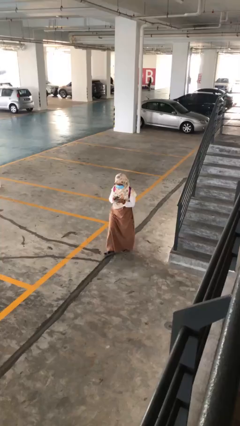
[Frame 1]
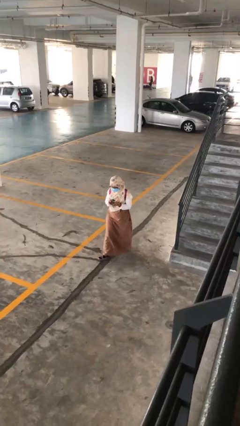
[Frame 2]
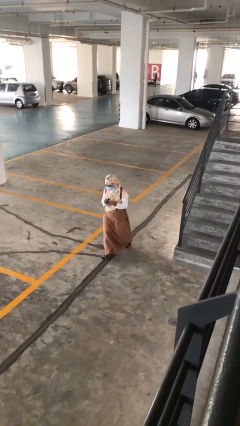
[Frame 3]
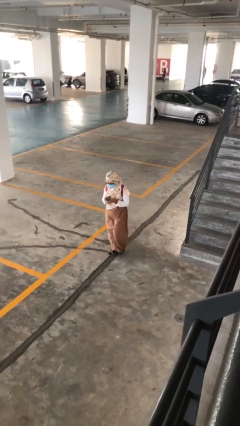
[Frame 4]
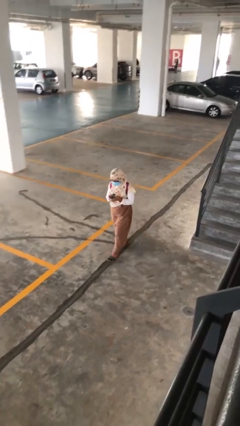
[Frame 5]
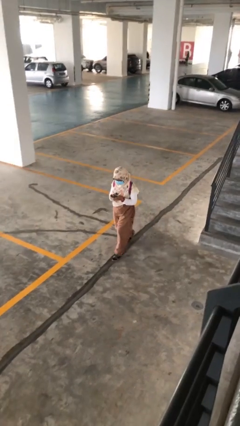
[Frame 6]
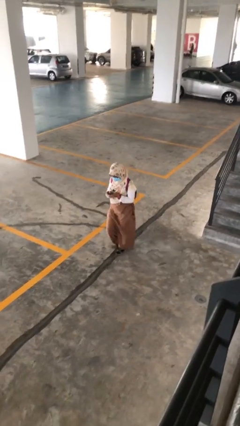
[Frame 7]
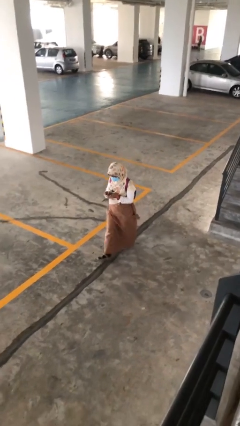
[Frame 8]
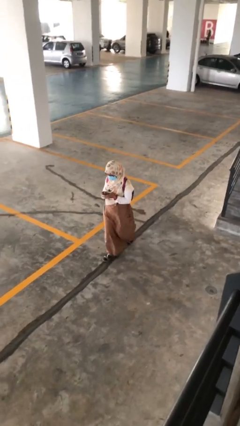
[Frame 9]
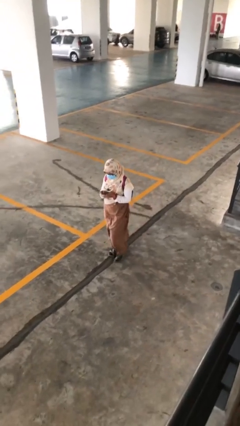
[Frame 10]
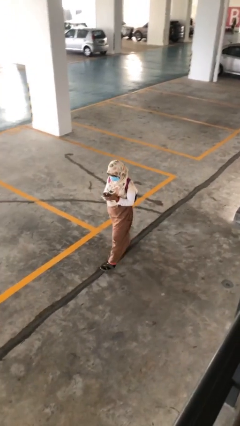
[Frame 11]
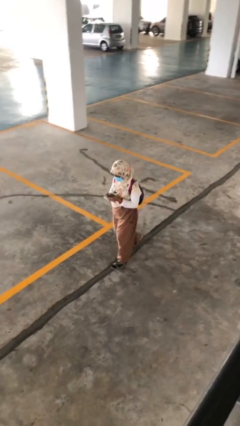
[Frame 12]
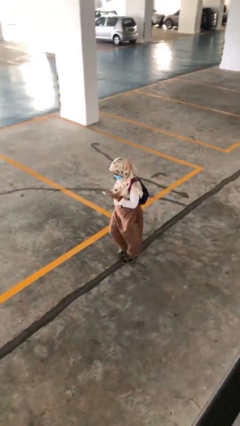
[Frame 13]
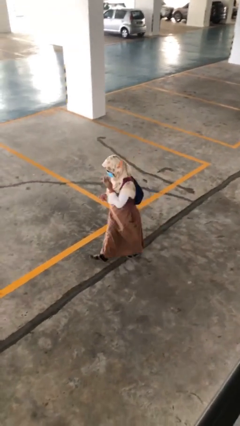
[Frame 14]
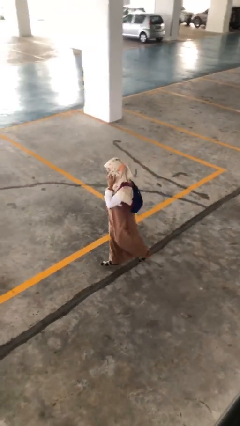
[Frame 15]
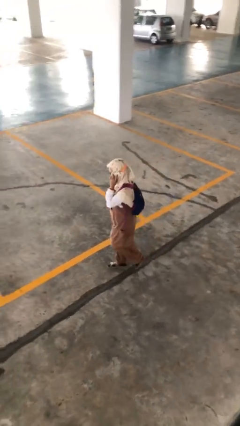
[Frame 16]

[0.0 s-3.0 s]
person texts on phone

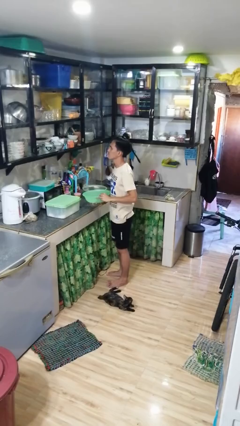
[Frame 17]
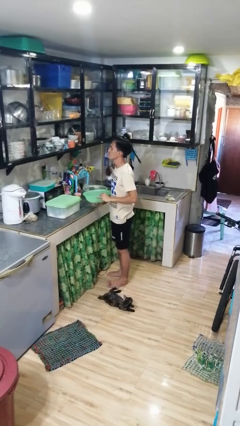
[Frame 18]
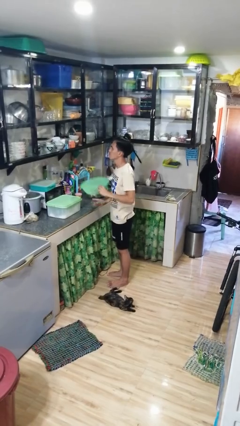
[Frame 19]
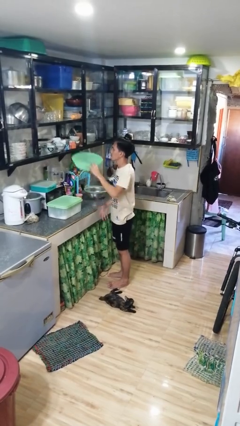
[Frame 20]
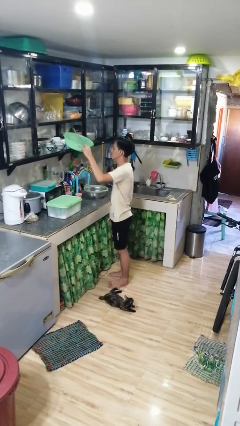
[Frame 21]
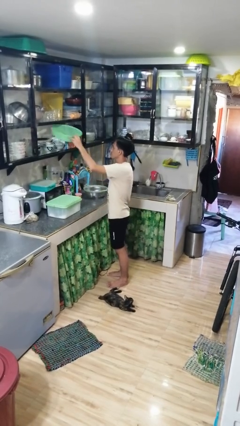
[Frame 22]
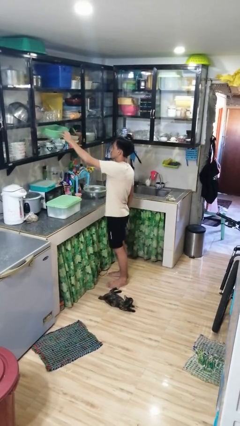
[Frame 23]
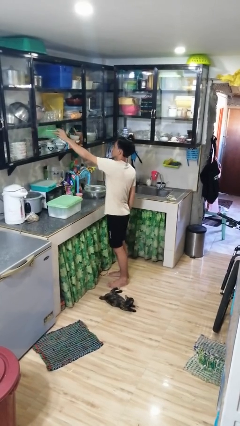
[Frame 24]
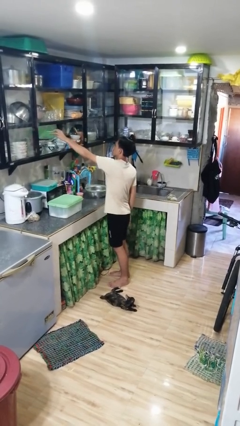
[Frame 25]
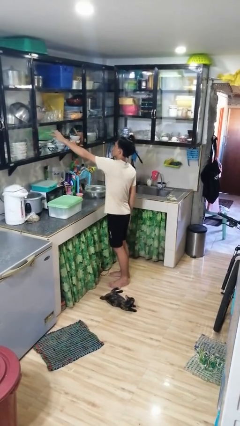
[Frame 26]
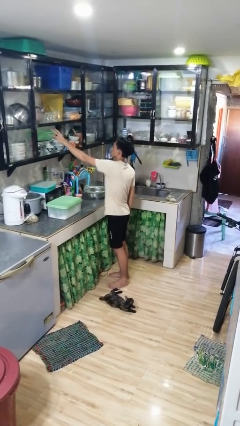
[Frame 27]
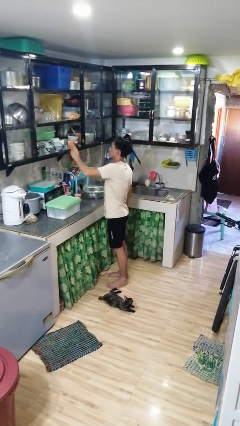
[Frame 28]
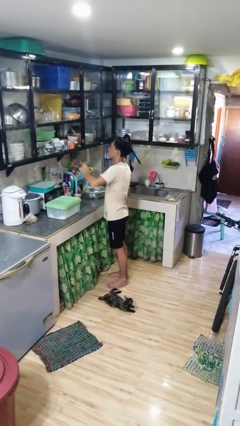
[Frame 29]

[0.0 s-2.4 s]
person puts down object into cabinet

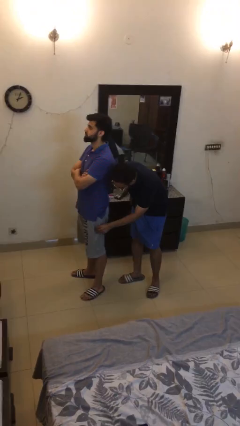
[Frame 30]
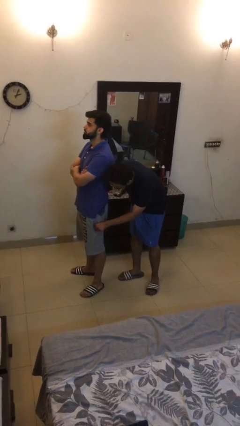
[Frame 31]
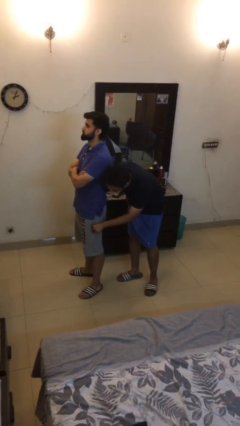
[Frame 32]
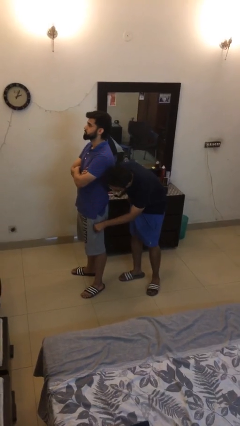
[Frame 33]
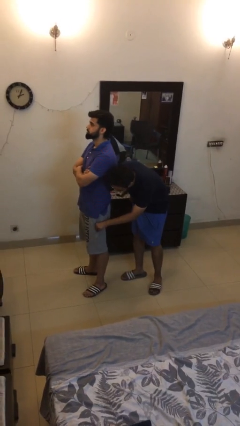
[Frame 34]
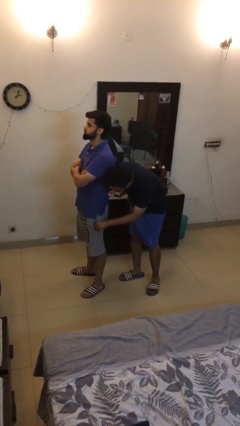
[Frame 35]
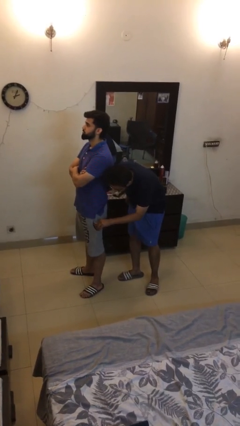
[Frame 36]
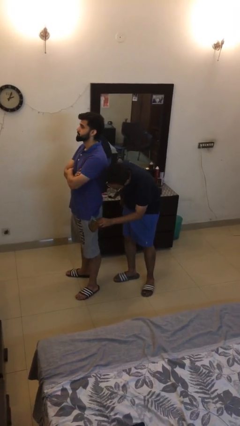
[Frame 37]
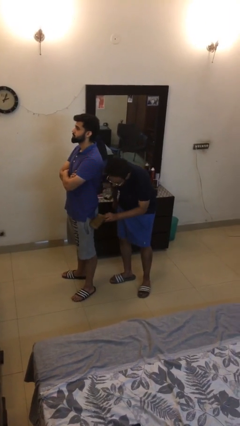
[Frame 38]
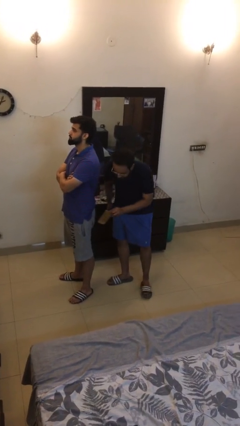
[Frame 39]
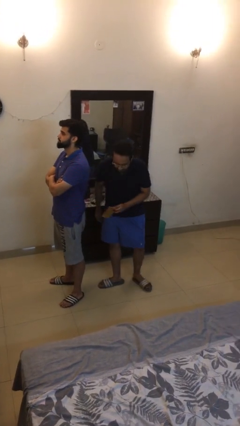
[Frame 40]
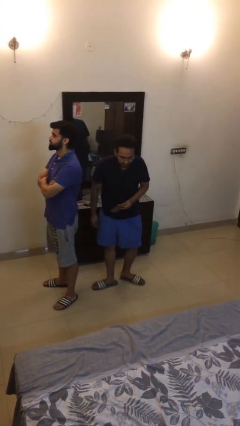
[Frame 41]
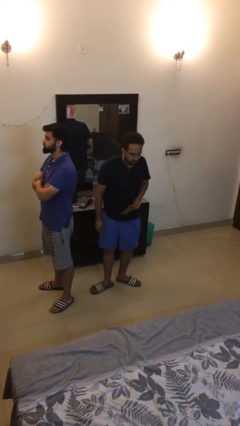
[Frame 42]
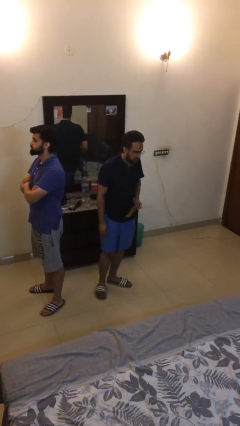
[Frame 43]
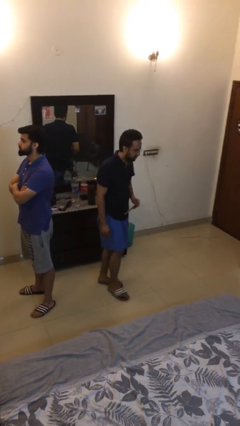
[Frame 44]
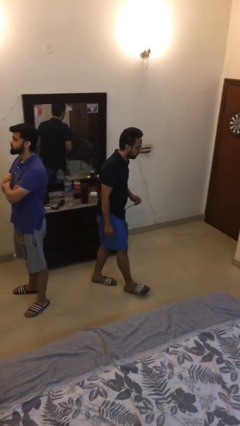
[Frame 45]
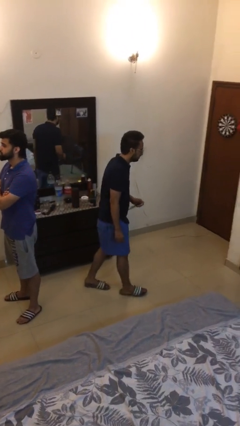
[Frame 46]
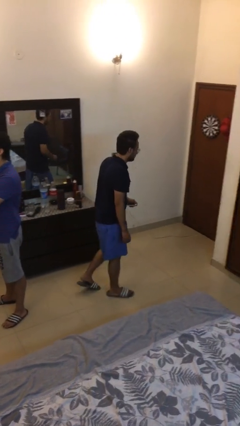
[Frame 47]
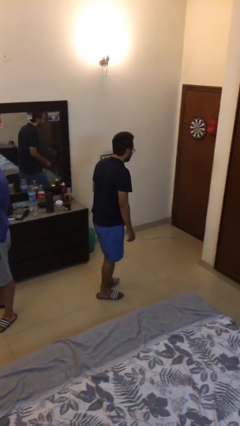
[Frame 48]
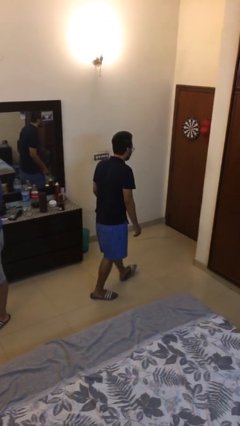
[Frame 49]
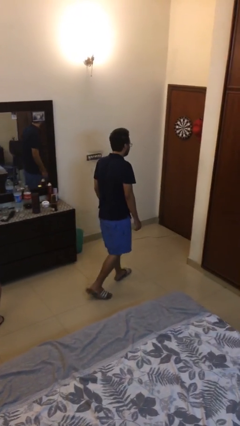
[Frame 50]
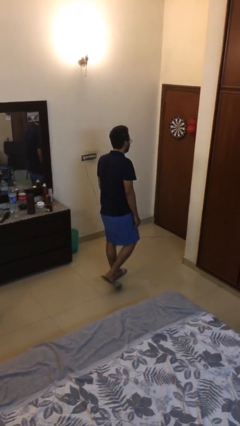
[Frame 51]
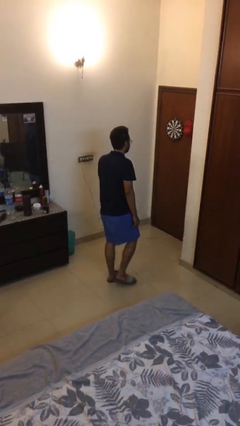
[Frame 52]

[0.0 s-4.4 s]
person steals object from person

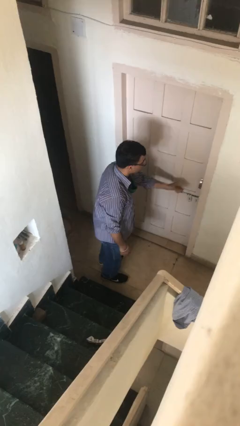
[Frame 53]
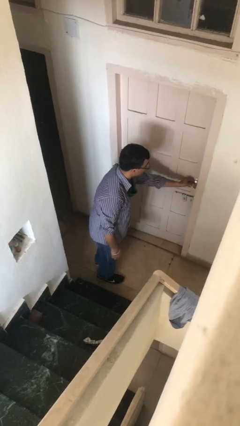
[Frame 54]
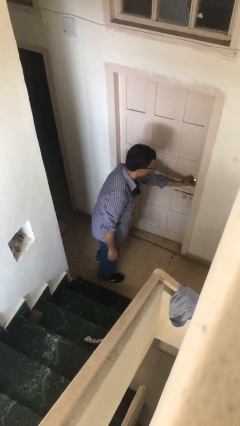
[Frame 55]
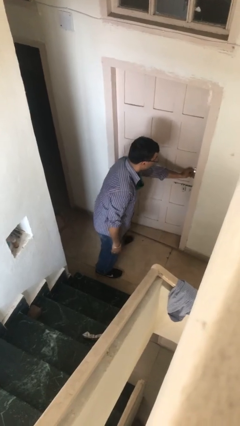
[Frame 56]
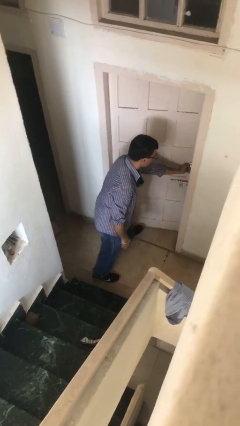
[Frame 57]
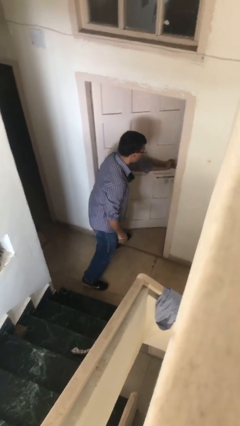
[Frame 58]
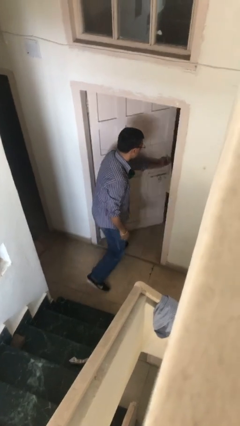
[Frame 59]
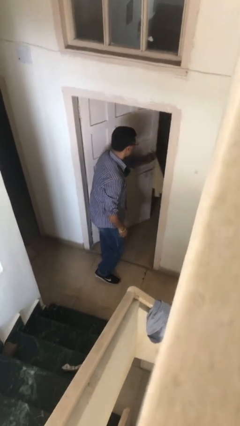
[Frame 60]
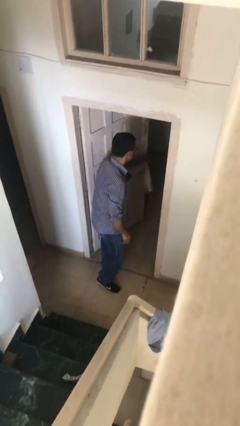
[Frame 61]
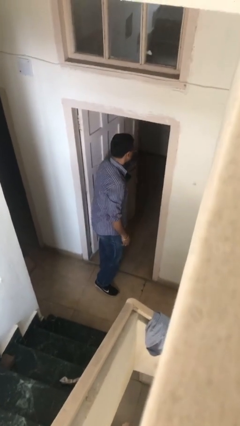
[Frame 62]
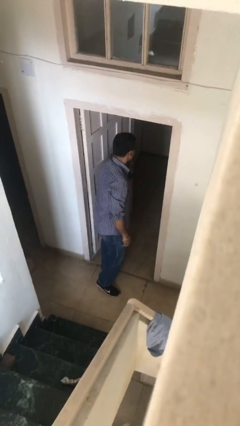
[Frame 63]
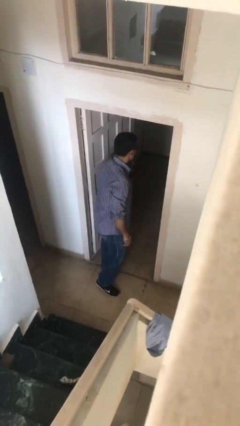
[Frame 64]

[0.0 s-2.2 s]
person opens facility door

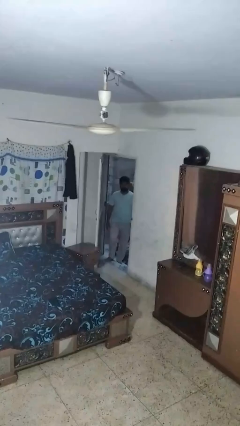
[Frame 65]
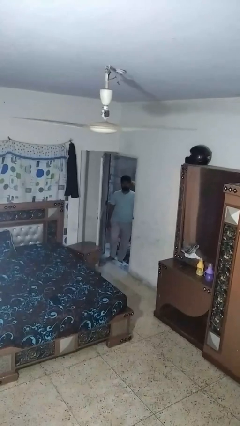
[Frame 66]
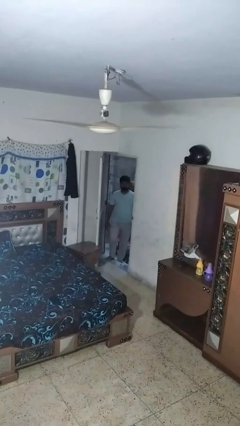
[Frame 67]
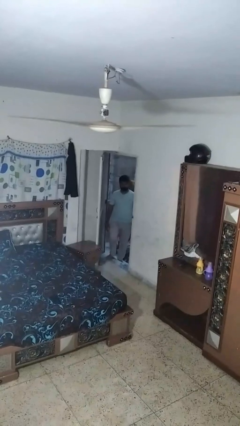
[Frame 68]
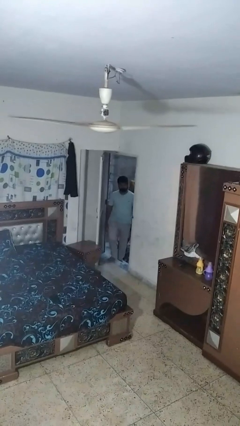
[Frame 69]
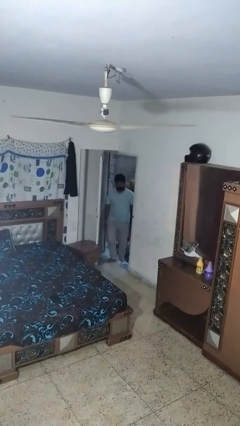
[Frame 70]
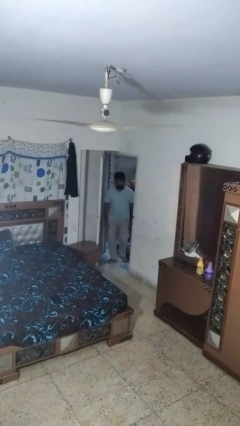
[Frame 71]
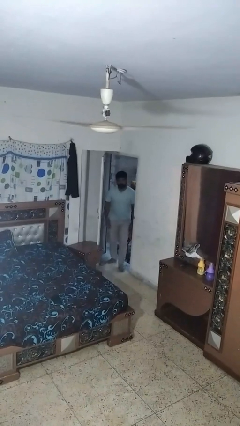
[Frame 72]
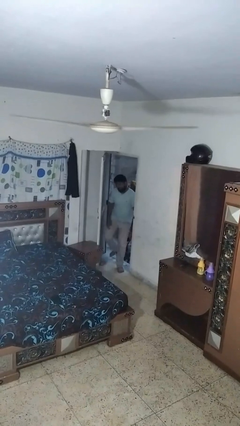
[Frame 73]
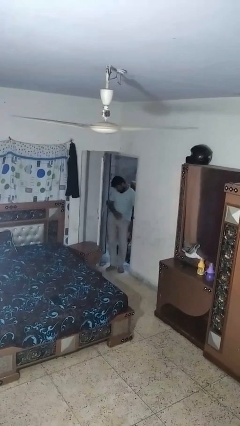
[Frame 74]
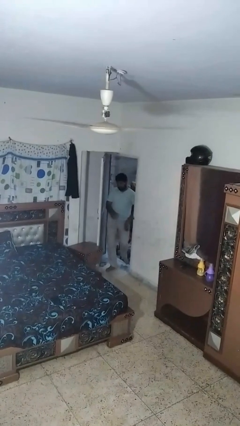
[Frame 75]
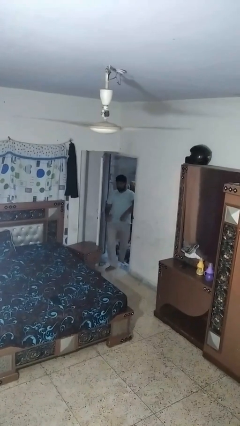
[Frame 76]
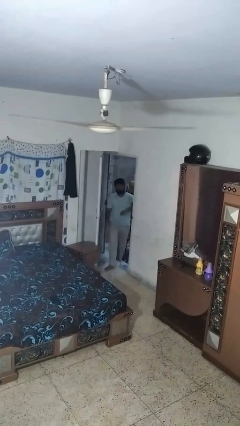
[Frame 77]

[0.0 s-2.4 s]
person bumps into wall

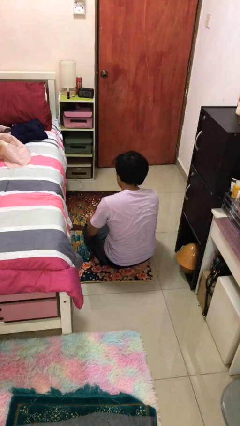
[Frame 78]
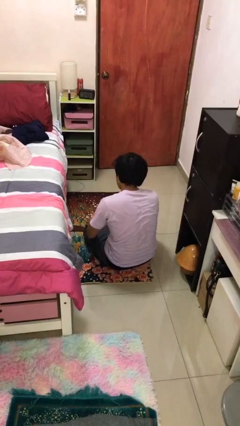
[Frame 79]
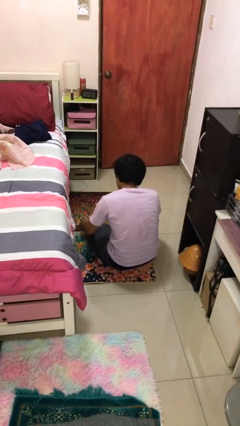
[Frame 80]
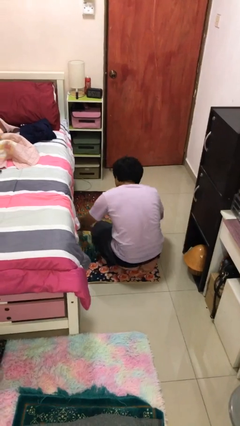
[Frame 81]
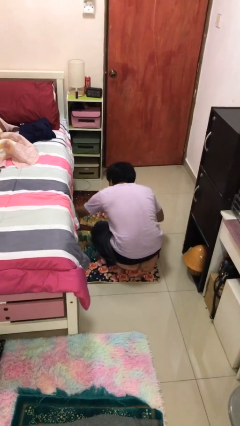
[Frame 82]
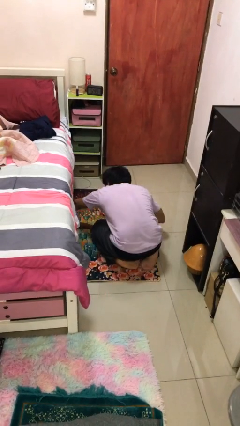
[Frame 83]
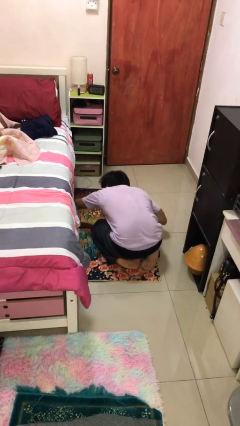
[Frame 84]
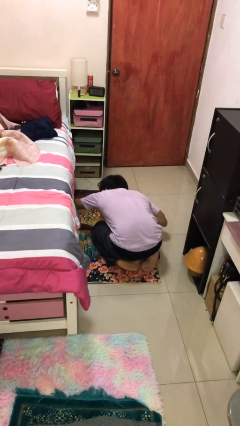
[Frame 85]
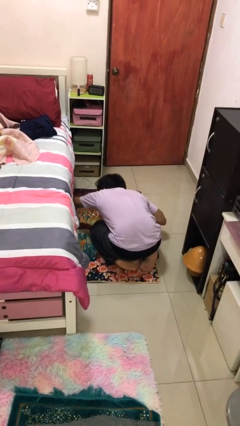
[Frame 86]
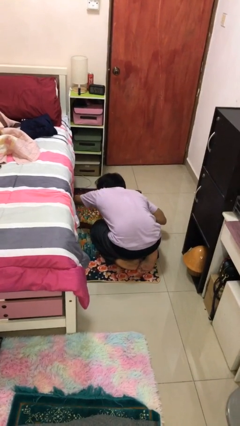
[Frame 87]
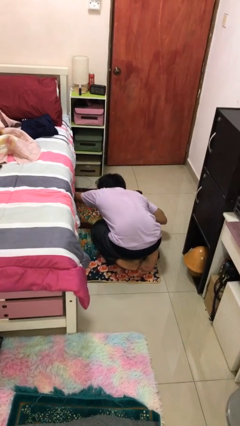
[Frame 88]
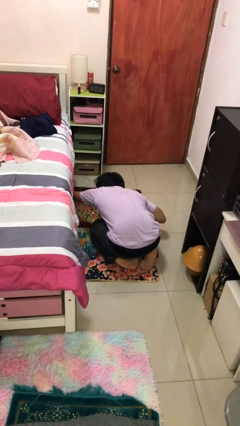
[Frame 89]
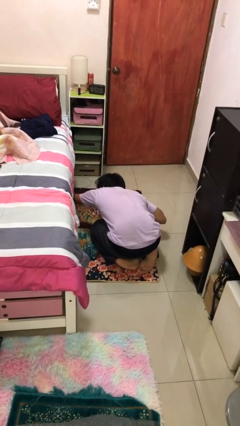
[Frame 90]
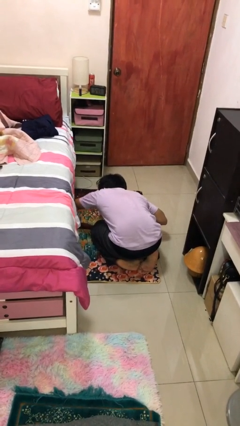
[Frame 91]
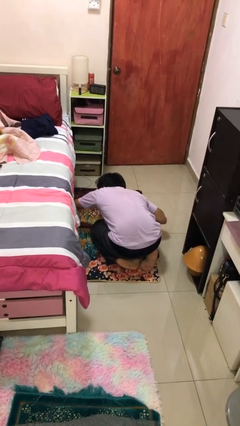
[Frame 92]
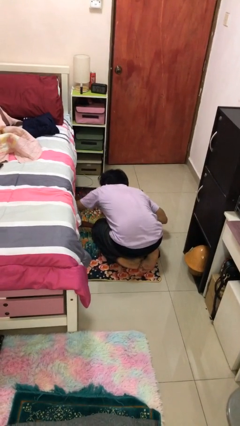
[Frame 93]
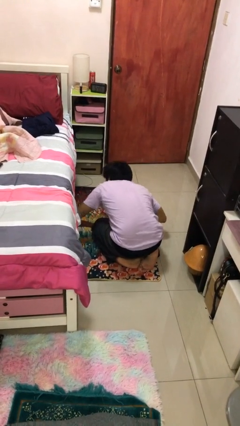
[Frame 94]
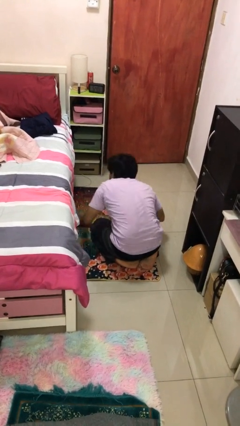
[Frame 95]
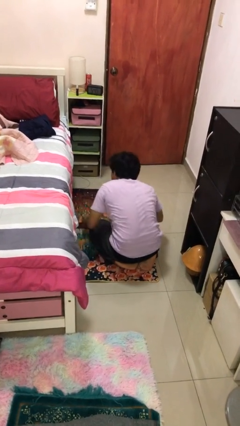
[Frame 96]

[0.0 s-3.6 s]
person searches under bed
